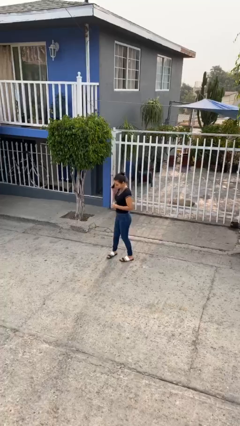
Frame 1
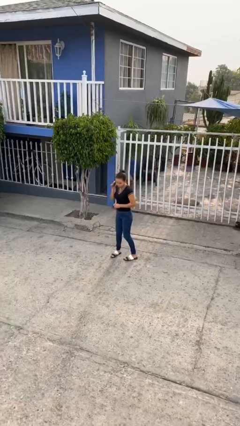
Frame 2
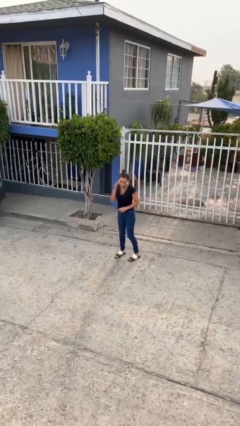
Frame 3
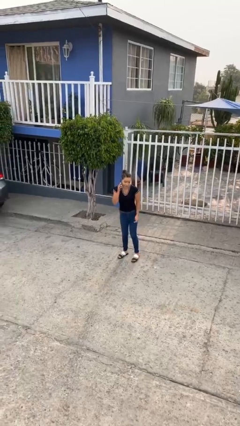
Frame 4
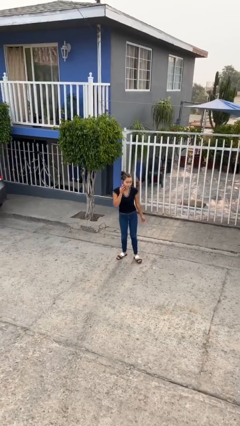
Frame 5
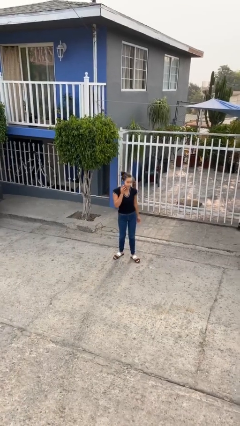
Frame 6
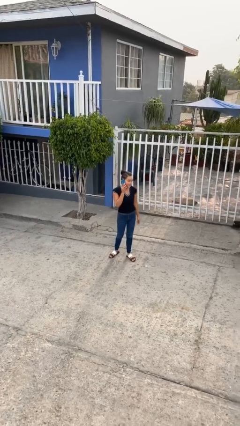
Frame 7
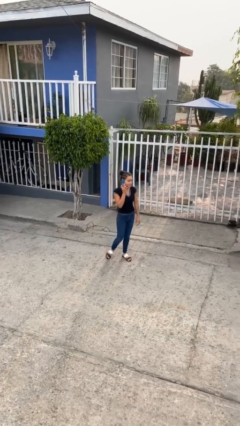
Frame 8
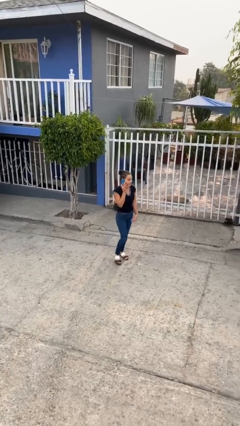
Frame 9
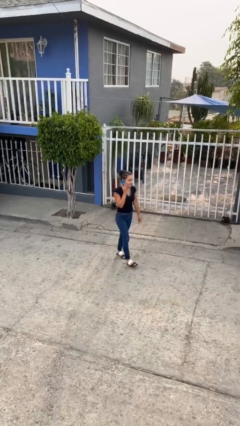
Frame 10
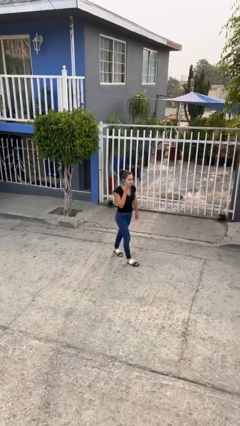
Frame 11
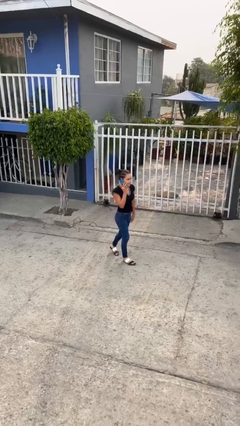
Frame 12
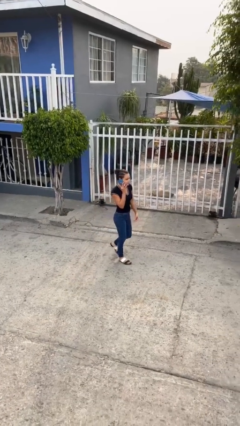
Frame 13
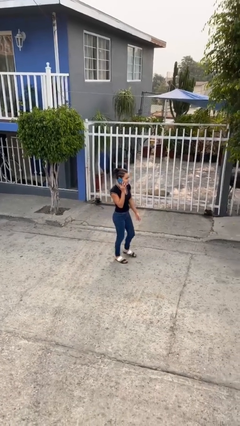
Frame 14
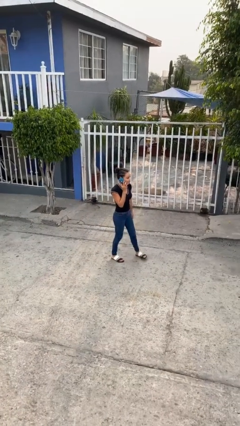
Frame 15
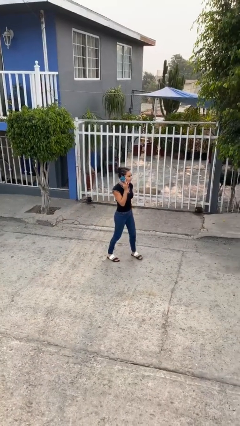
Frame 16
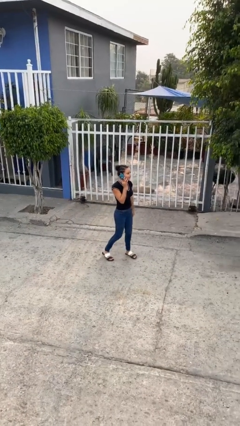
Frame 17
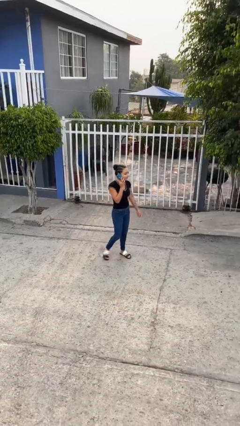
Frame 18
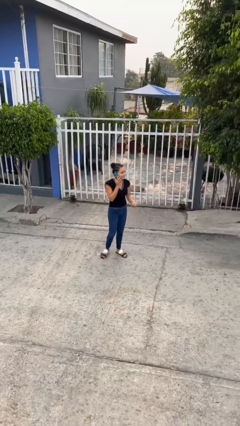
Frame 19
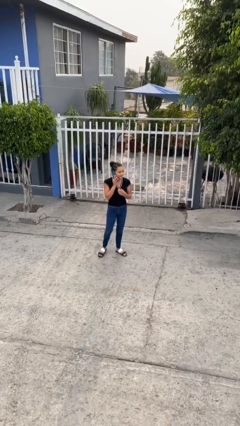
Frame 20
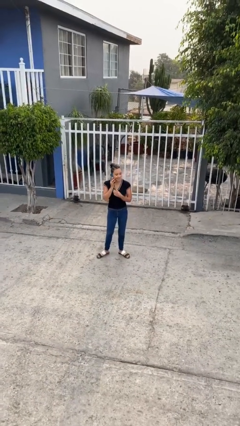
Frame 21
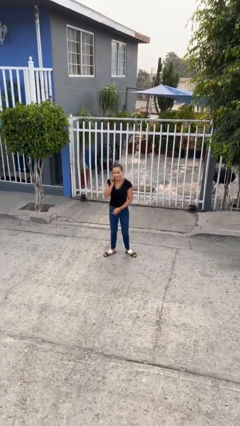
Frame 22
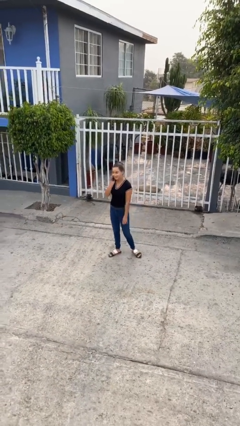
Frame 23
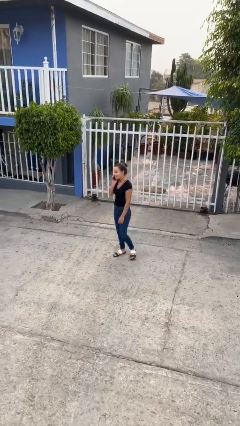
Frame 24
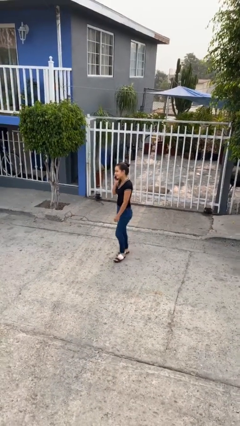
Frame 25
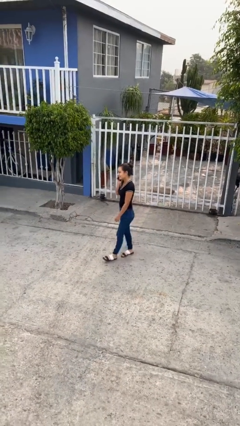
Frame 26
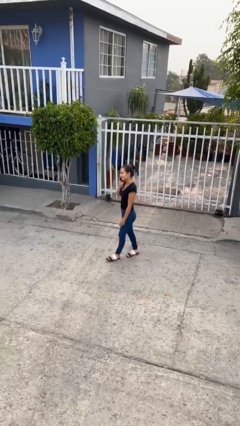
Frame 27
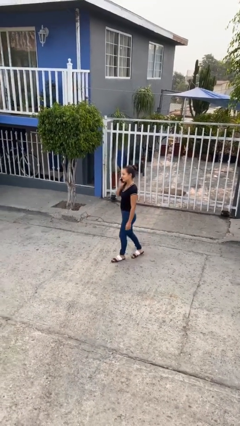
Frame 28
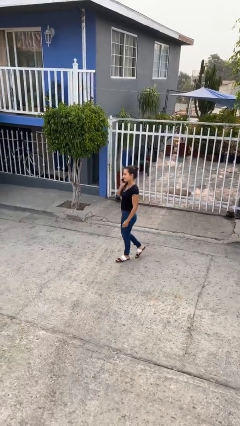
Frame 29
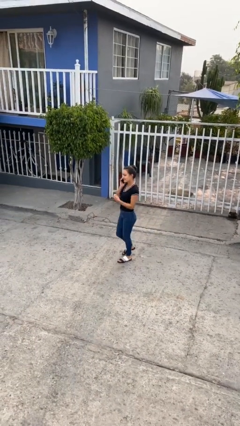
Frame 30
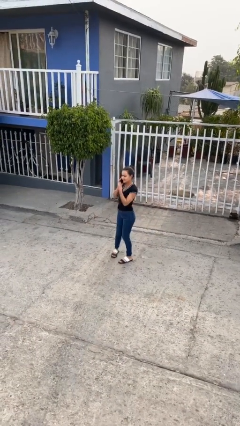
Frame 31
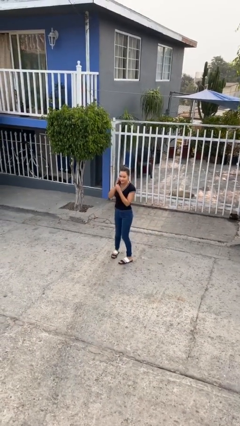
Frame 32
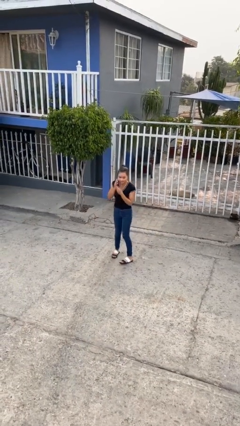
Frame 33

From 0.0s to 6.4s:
person talks on phone

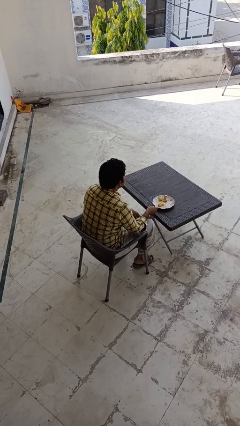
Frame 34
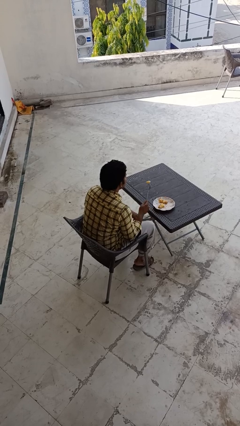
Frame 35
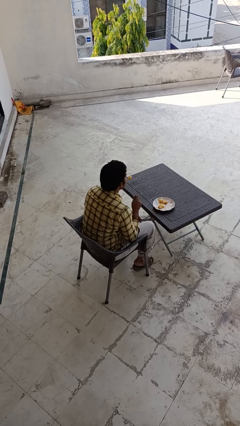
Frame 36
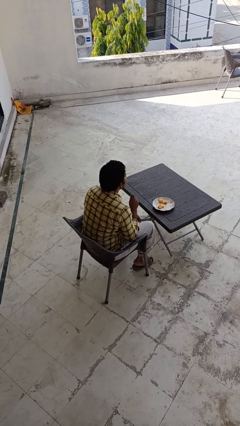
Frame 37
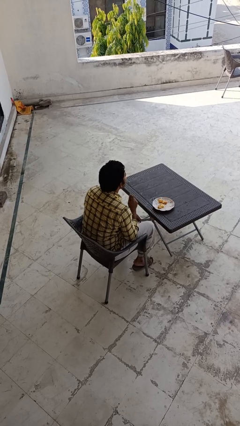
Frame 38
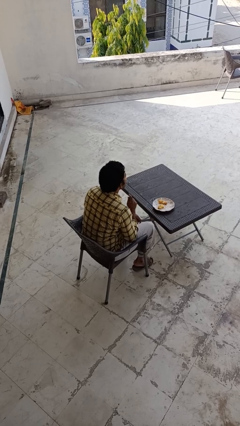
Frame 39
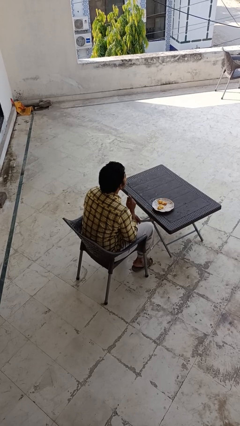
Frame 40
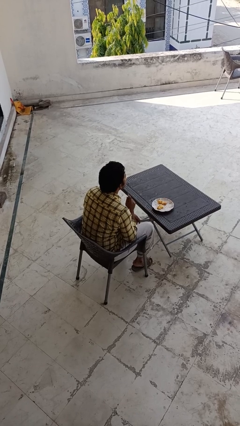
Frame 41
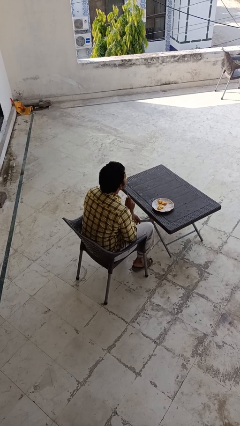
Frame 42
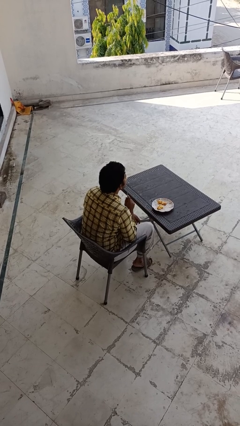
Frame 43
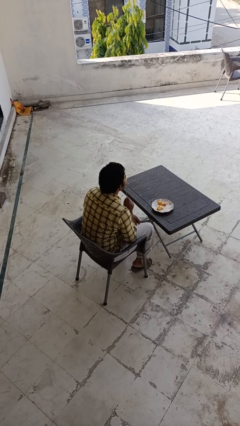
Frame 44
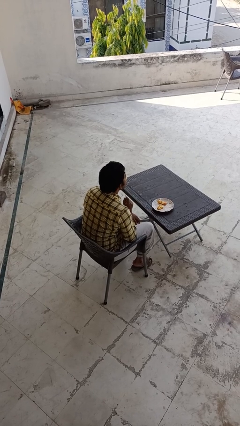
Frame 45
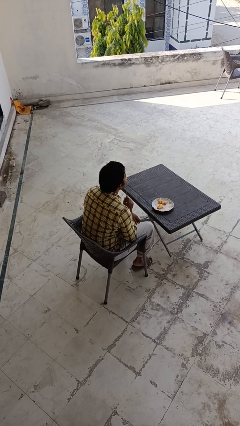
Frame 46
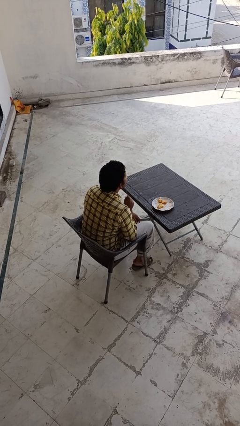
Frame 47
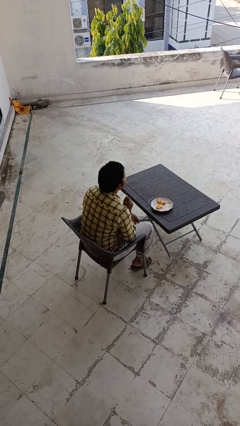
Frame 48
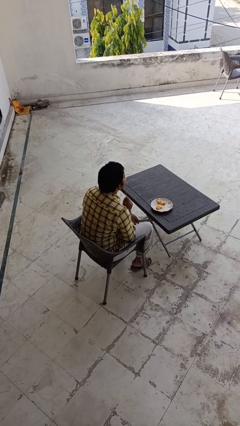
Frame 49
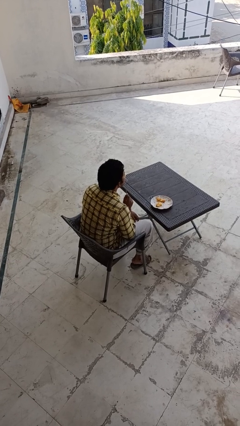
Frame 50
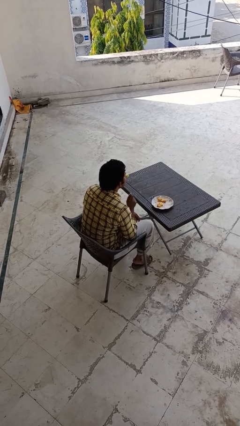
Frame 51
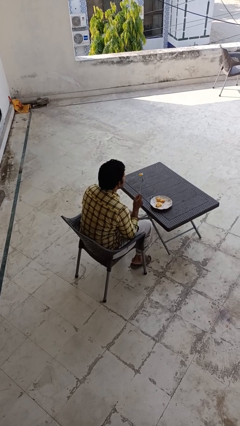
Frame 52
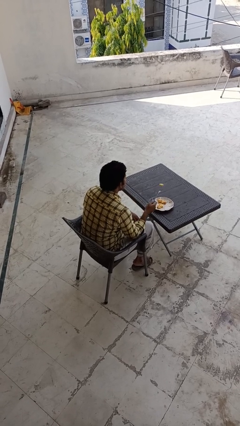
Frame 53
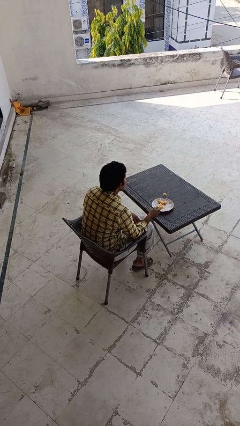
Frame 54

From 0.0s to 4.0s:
person eats with utensil

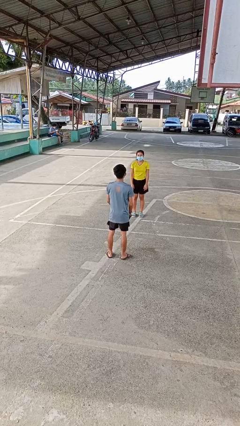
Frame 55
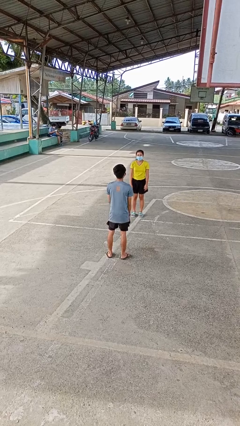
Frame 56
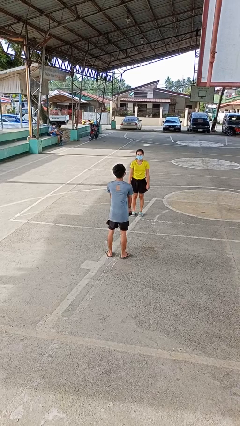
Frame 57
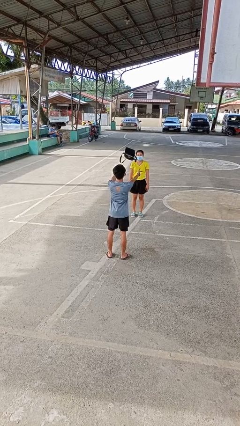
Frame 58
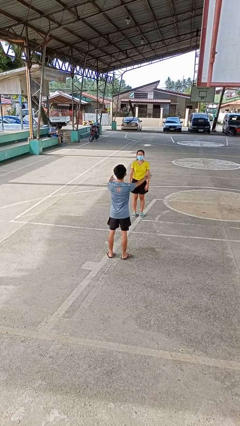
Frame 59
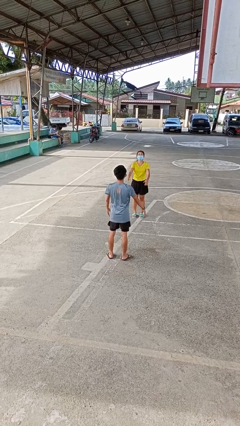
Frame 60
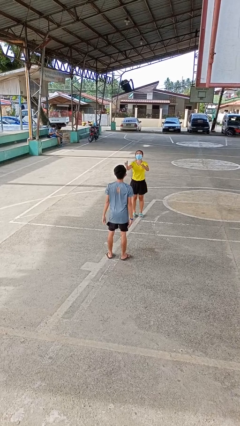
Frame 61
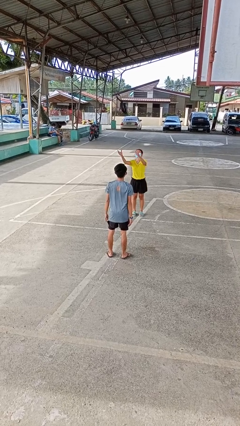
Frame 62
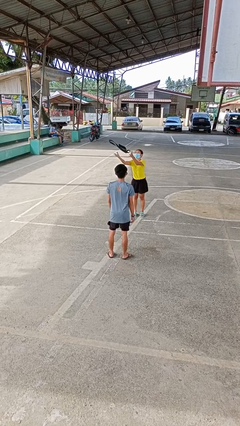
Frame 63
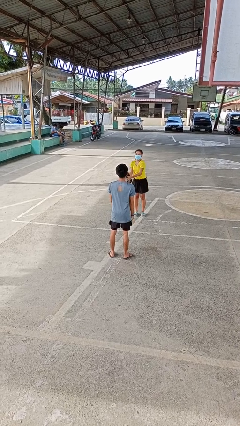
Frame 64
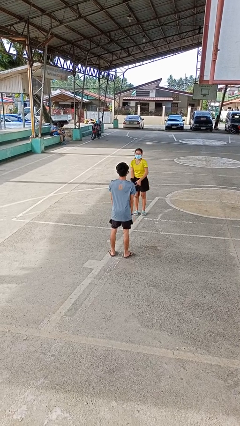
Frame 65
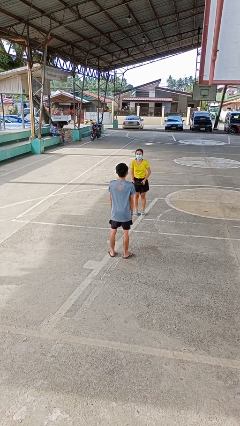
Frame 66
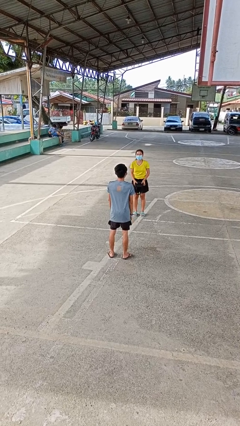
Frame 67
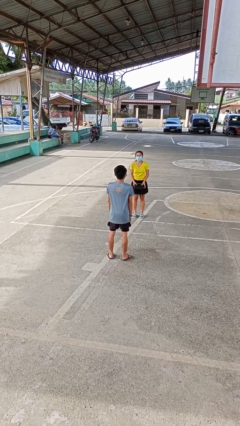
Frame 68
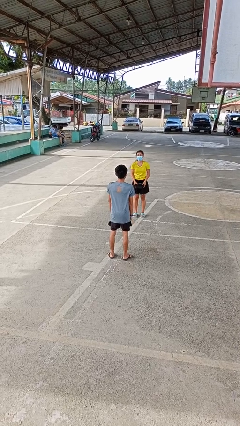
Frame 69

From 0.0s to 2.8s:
person throws object to person

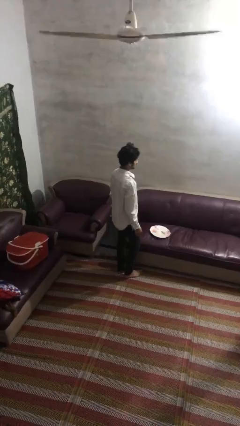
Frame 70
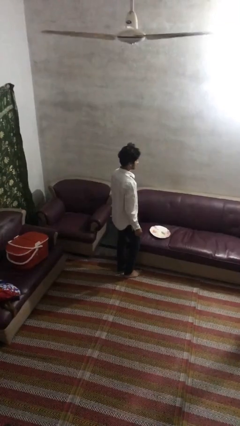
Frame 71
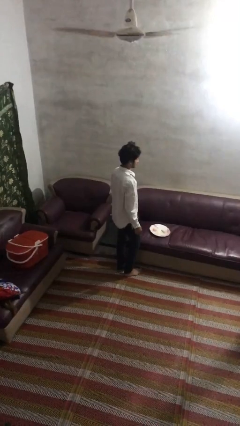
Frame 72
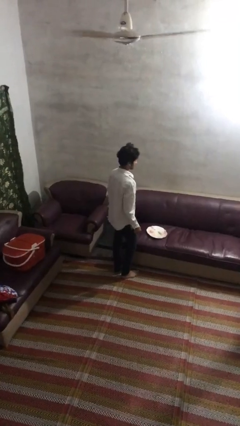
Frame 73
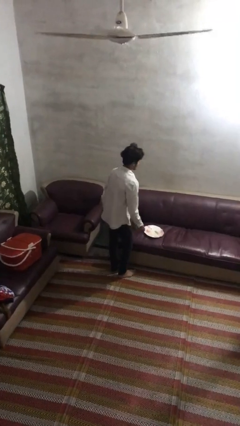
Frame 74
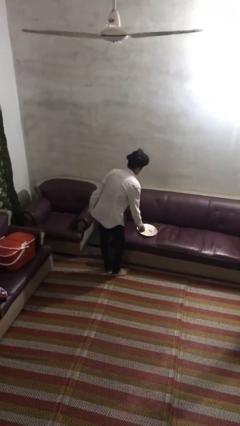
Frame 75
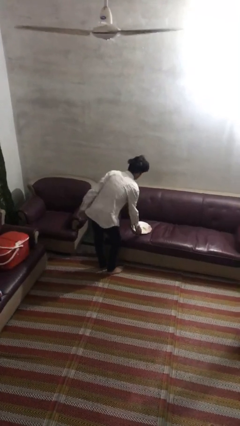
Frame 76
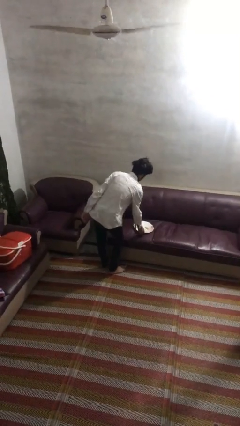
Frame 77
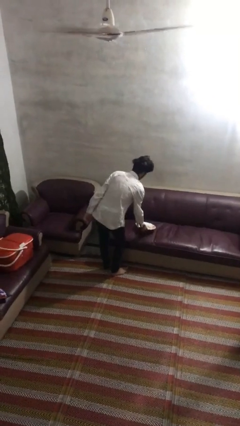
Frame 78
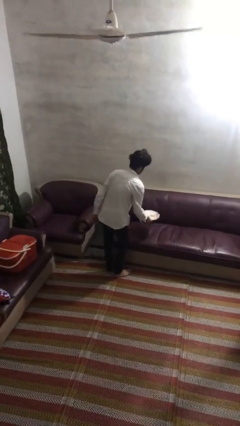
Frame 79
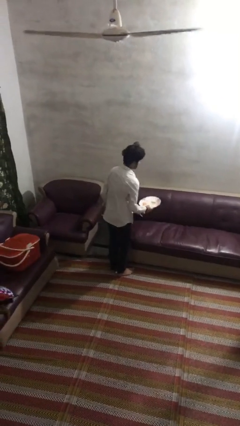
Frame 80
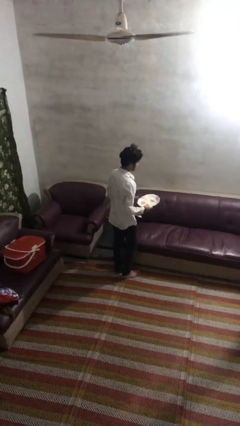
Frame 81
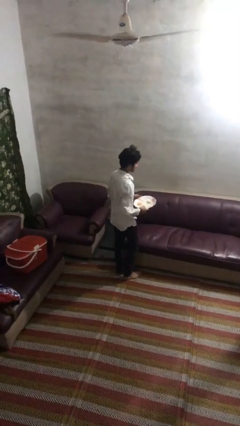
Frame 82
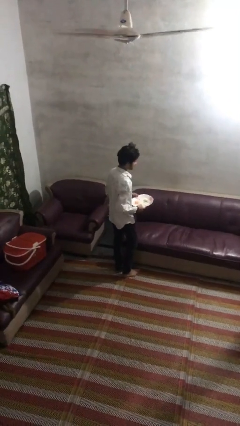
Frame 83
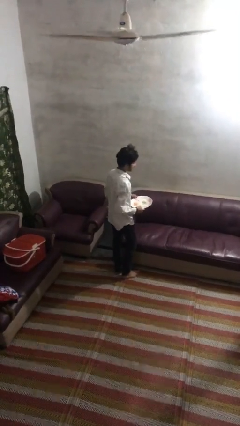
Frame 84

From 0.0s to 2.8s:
person picks up object from couch

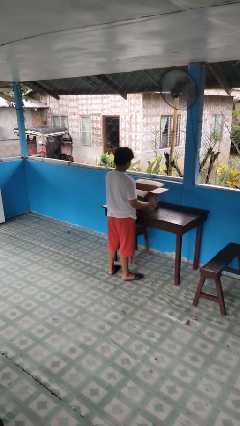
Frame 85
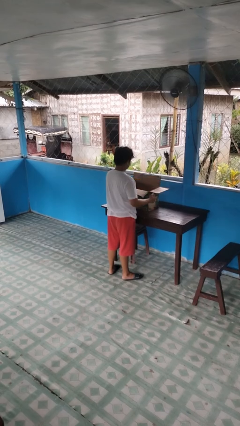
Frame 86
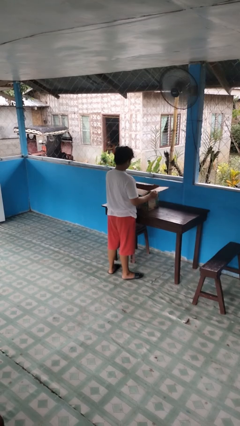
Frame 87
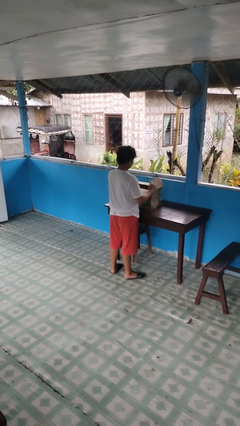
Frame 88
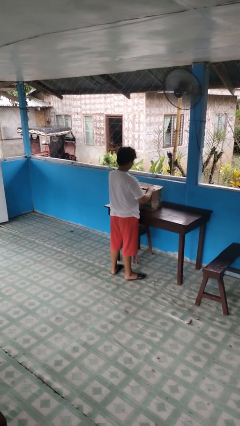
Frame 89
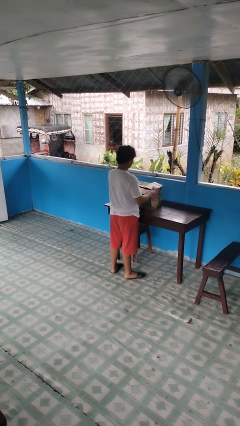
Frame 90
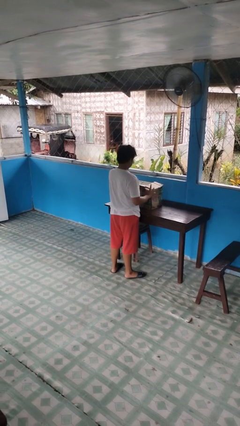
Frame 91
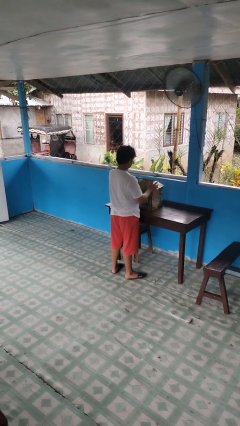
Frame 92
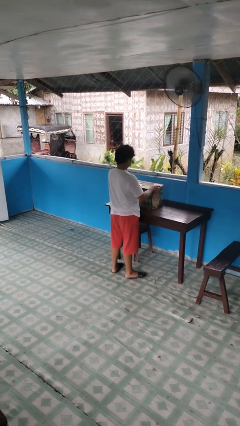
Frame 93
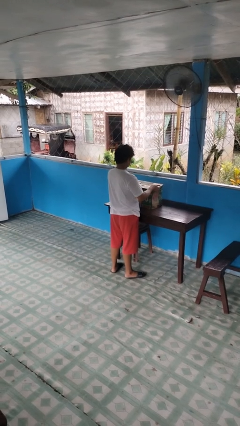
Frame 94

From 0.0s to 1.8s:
person closes box
